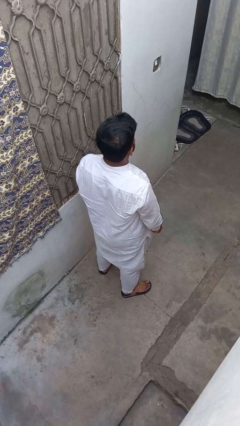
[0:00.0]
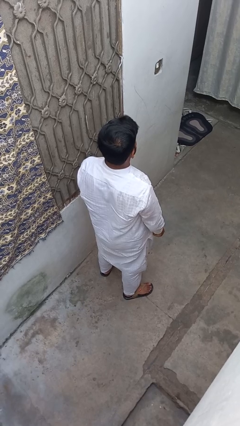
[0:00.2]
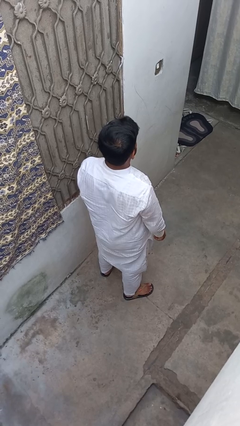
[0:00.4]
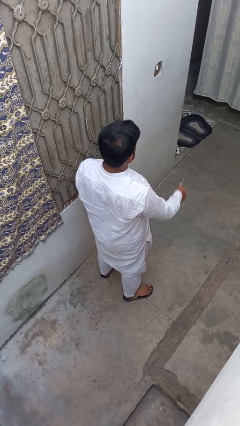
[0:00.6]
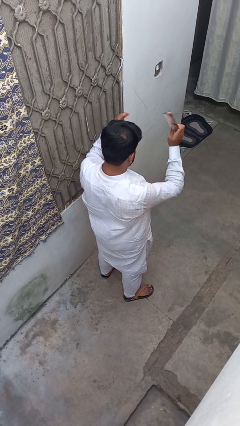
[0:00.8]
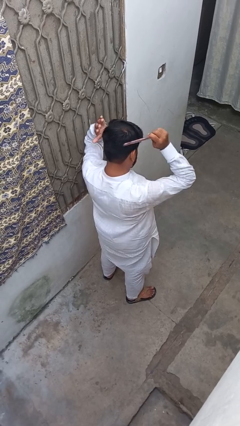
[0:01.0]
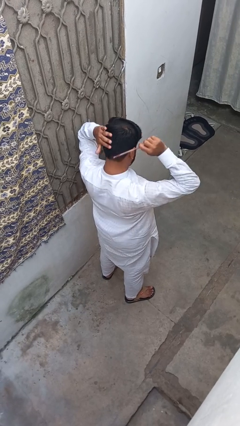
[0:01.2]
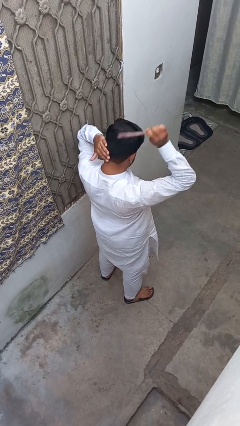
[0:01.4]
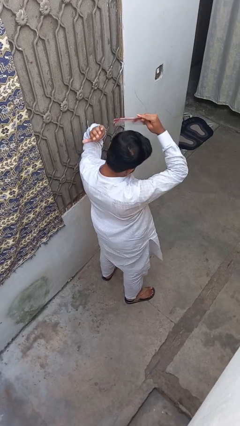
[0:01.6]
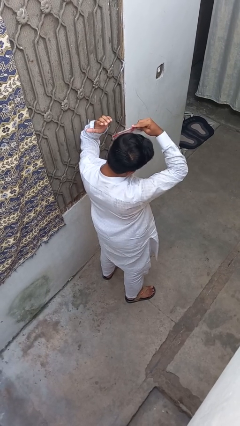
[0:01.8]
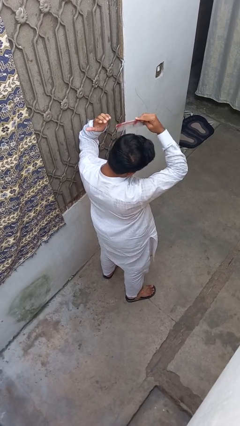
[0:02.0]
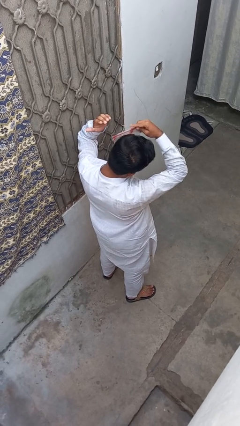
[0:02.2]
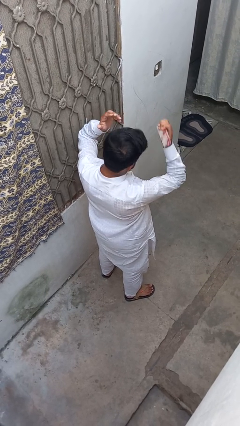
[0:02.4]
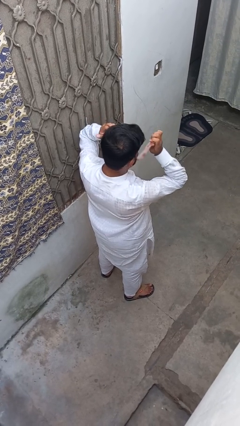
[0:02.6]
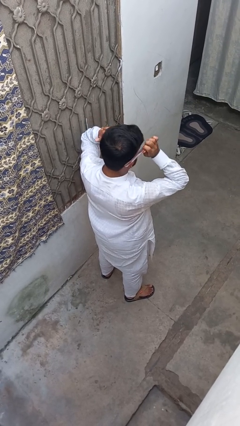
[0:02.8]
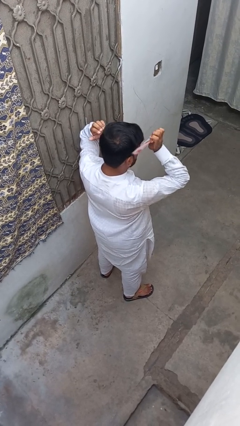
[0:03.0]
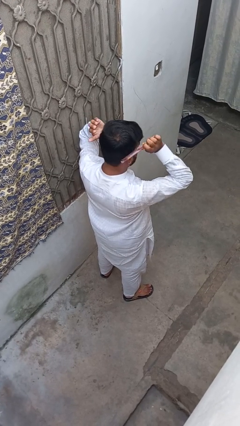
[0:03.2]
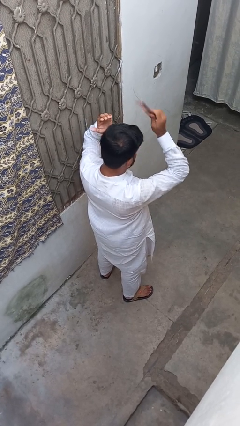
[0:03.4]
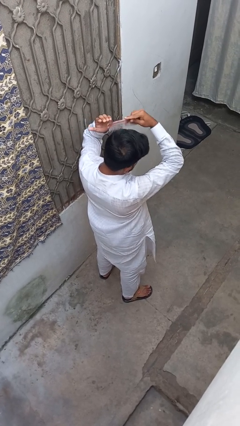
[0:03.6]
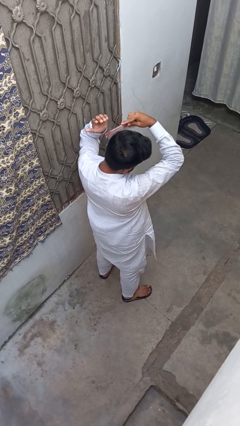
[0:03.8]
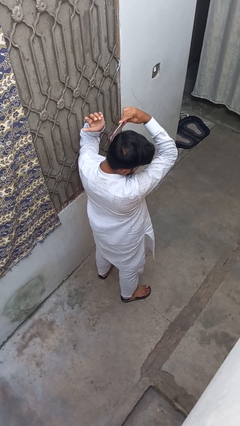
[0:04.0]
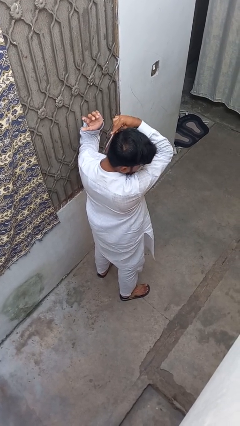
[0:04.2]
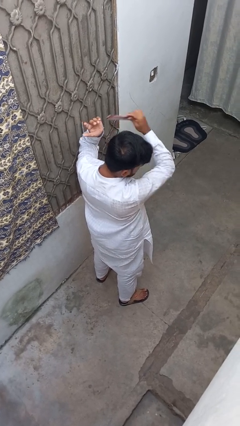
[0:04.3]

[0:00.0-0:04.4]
person brushes hair

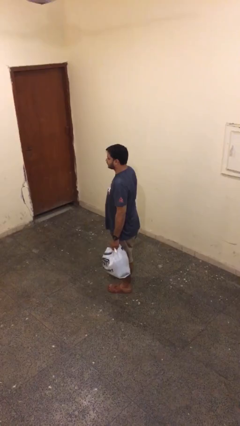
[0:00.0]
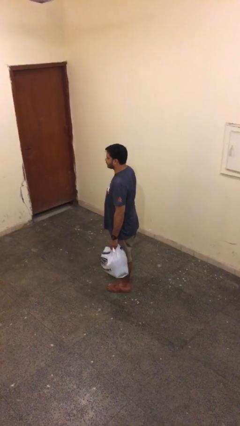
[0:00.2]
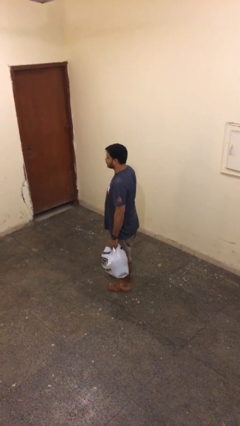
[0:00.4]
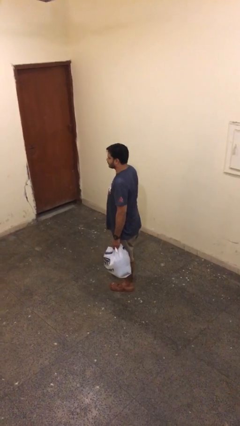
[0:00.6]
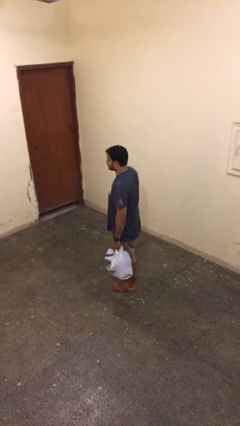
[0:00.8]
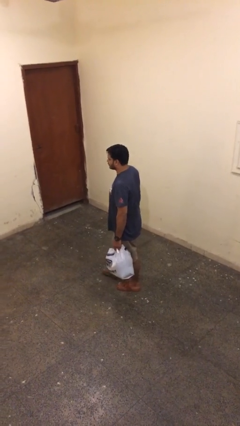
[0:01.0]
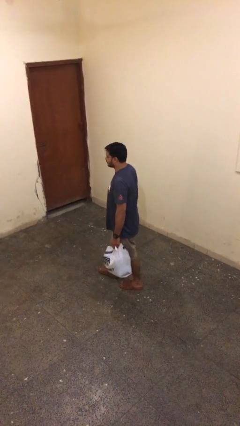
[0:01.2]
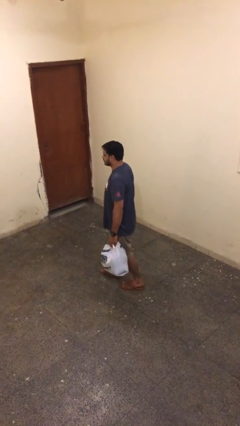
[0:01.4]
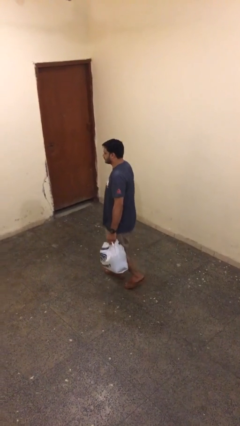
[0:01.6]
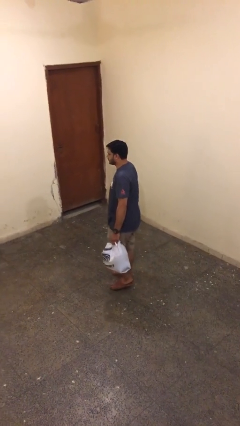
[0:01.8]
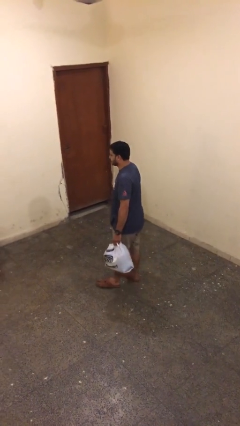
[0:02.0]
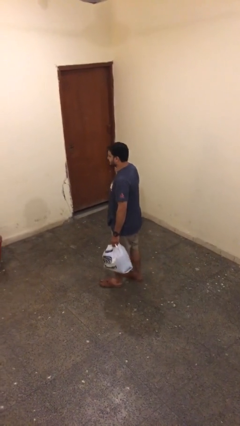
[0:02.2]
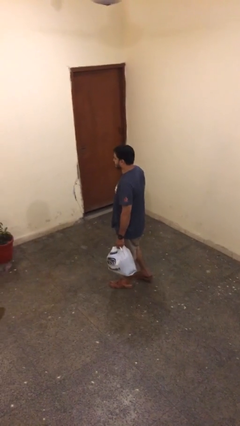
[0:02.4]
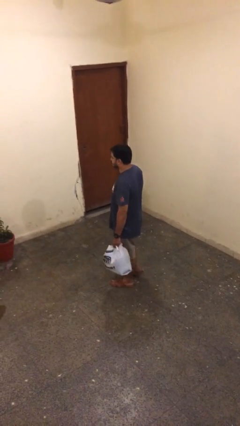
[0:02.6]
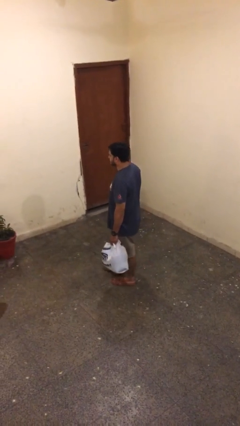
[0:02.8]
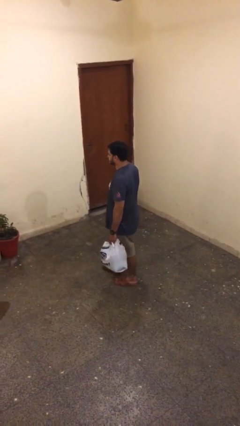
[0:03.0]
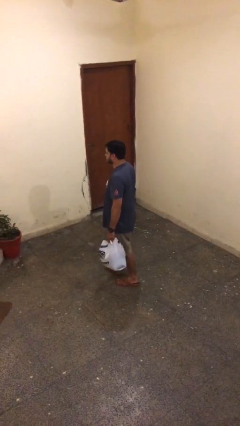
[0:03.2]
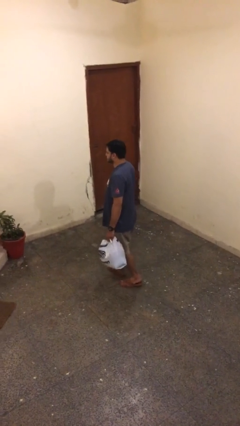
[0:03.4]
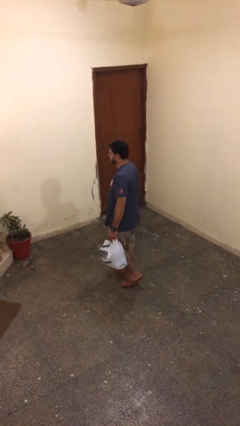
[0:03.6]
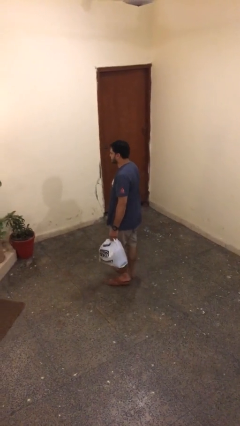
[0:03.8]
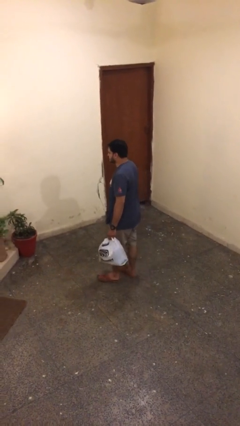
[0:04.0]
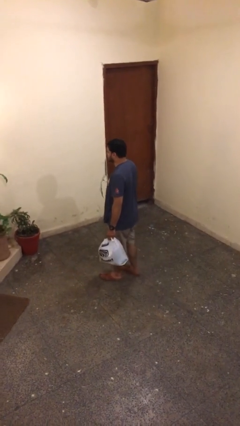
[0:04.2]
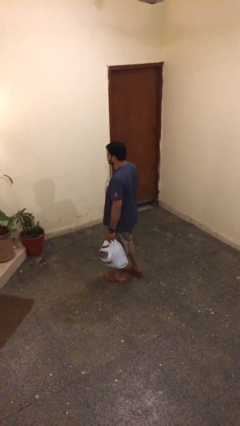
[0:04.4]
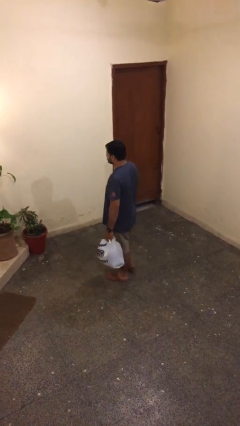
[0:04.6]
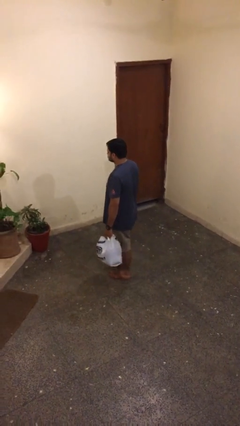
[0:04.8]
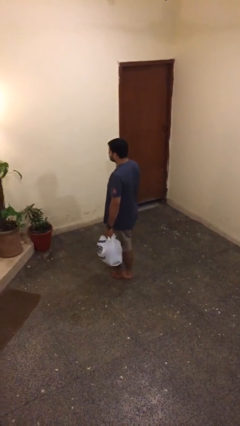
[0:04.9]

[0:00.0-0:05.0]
person carries heavy object

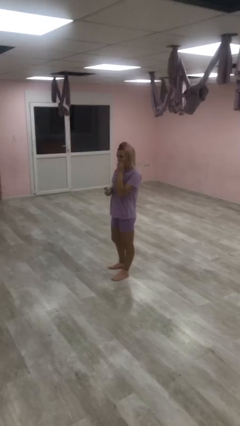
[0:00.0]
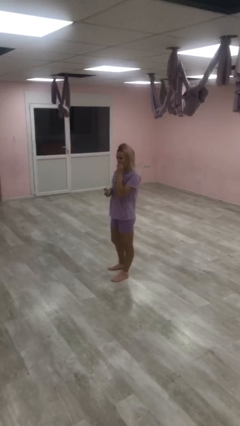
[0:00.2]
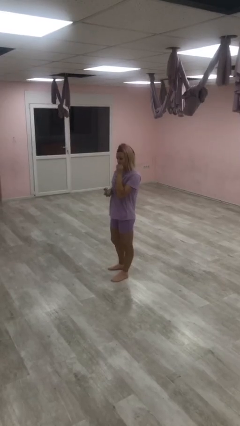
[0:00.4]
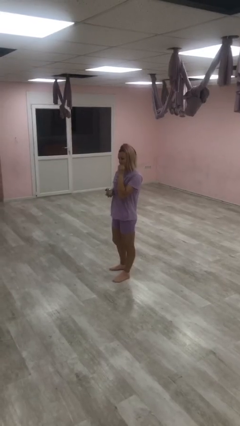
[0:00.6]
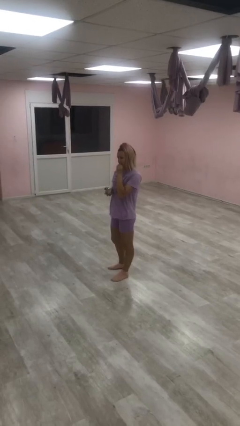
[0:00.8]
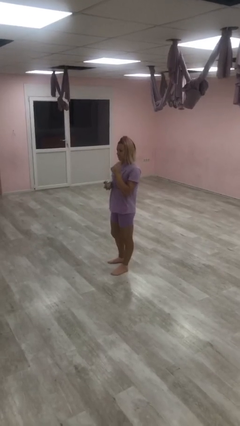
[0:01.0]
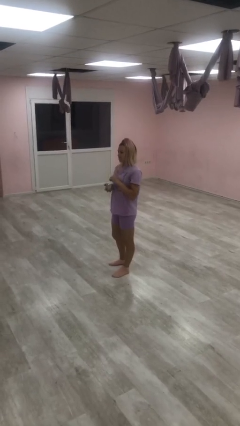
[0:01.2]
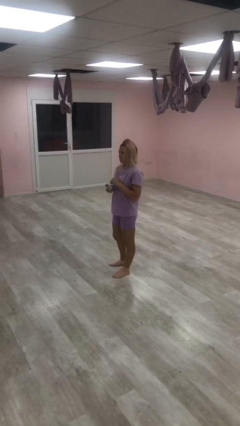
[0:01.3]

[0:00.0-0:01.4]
person eats snack from bag

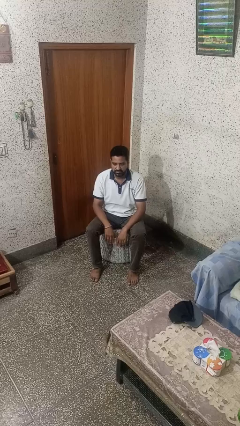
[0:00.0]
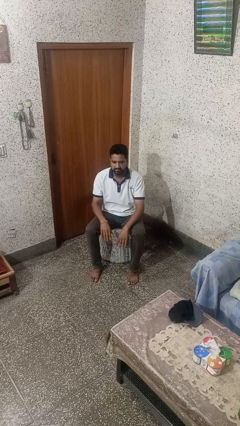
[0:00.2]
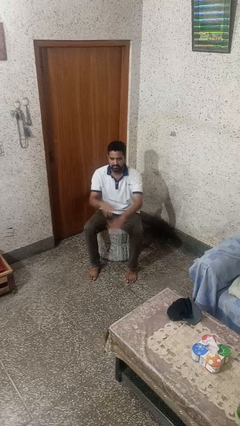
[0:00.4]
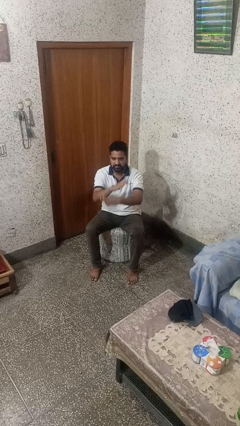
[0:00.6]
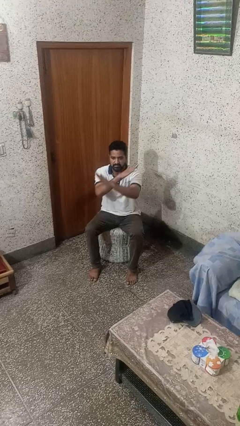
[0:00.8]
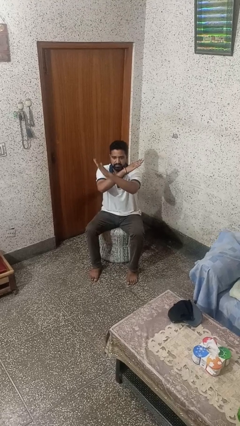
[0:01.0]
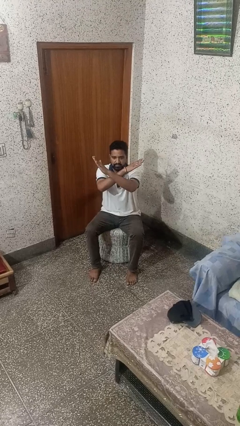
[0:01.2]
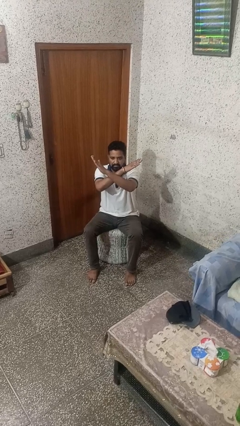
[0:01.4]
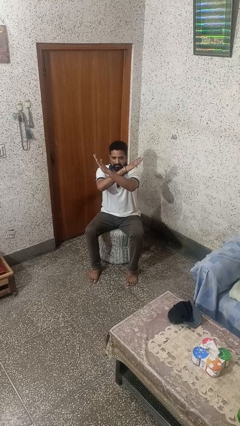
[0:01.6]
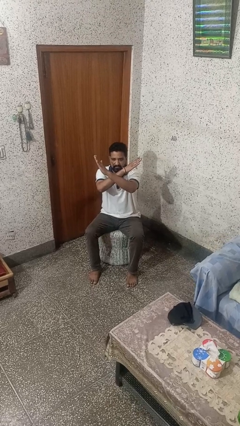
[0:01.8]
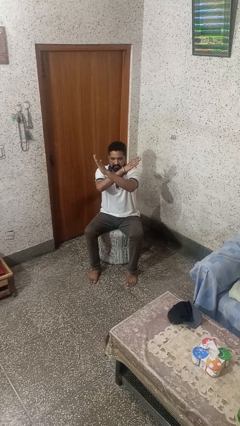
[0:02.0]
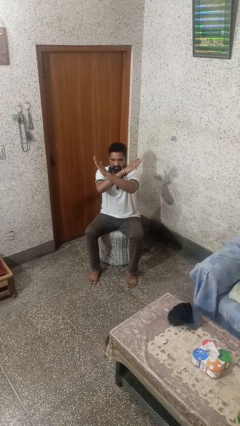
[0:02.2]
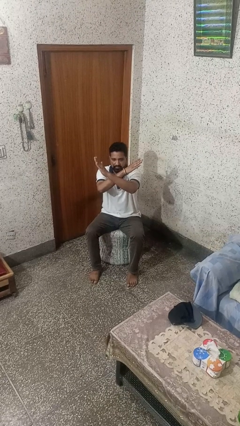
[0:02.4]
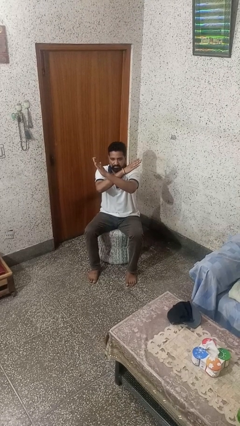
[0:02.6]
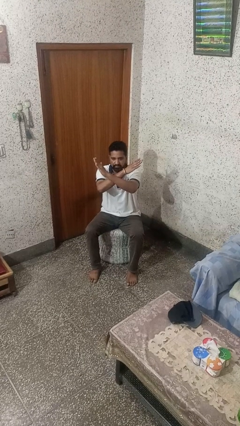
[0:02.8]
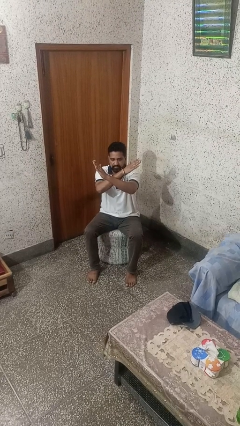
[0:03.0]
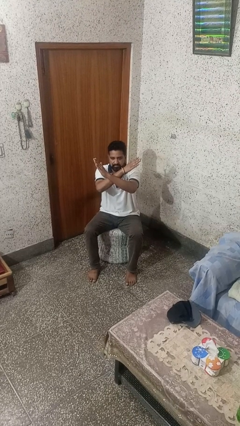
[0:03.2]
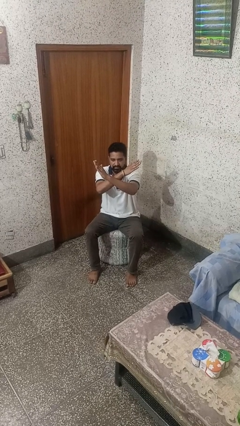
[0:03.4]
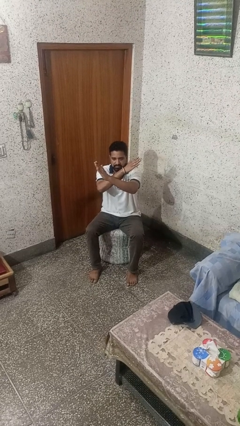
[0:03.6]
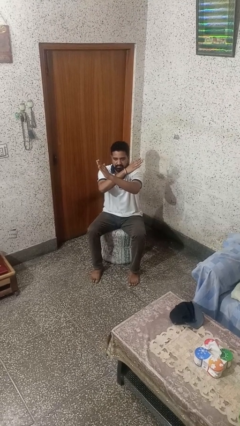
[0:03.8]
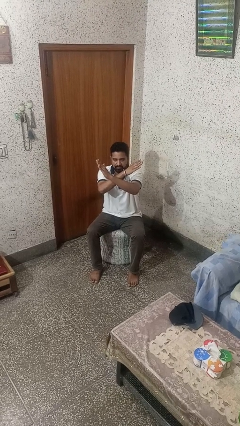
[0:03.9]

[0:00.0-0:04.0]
person gestures arms x

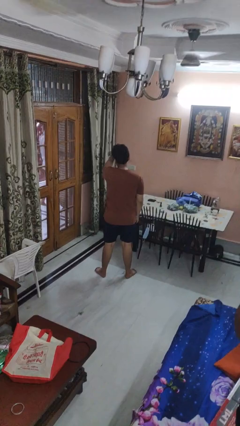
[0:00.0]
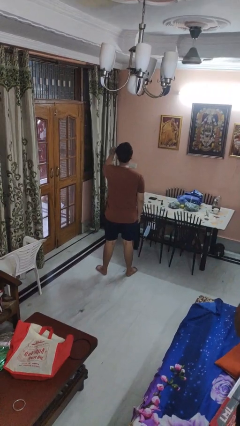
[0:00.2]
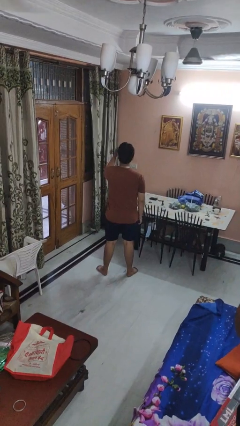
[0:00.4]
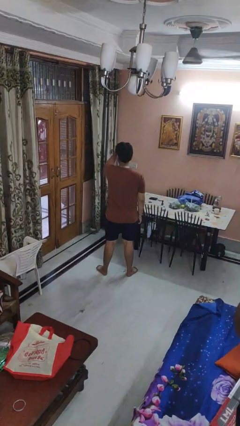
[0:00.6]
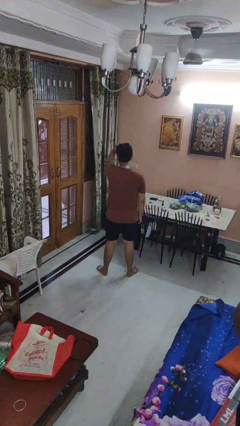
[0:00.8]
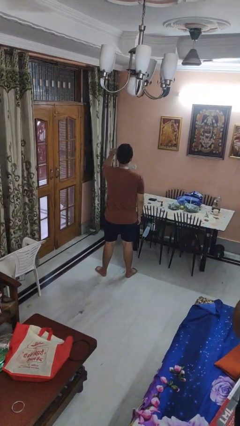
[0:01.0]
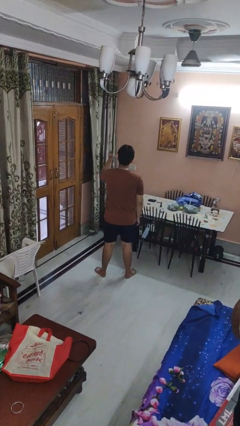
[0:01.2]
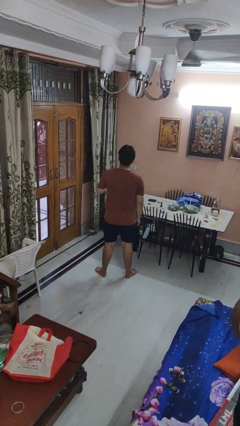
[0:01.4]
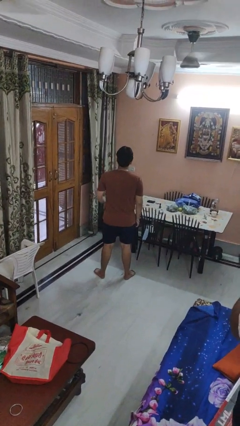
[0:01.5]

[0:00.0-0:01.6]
person strokes hair

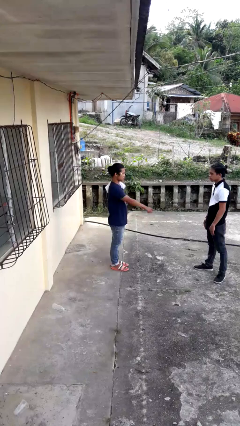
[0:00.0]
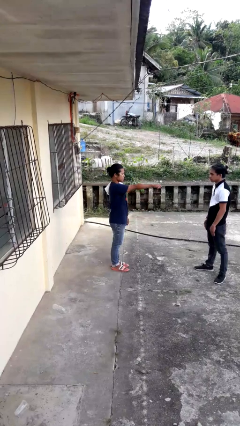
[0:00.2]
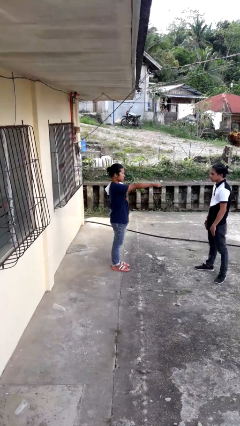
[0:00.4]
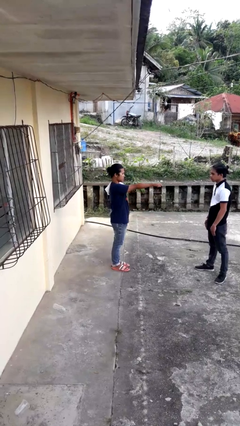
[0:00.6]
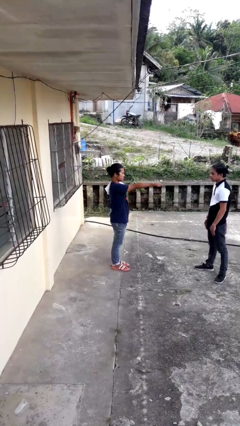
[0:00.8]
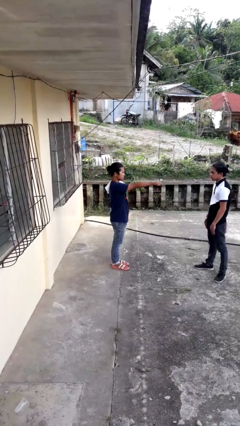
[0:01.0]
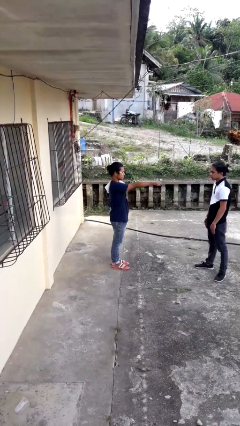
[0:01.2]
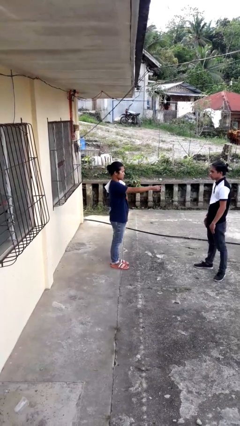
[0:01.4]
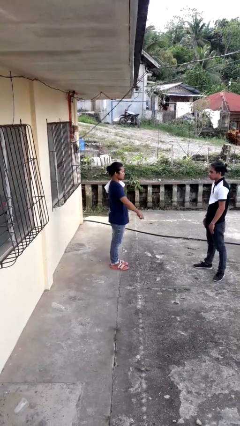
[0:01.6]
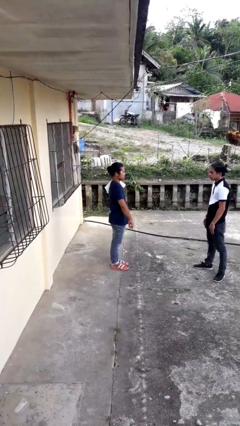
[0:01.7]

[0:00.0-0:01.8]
person points at person
